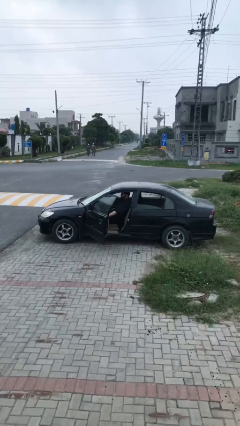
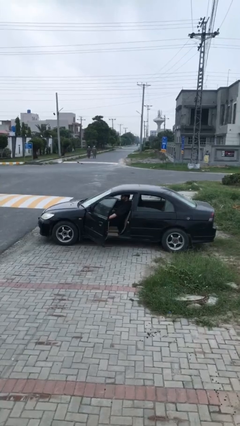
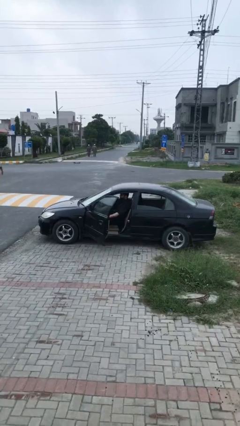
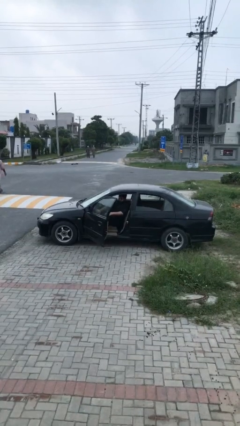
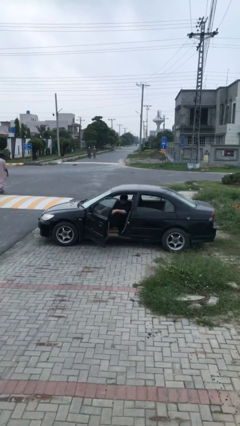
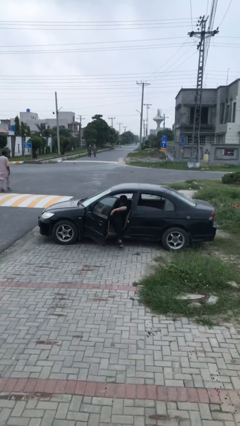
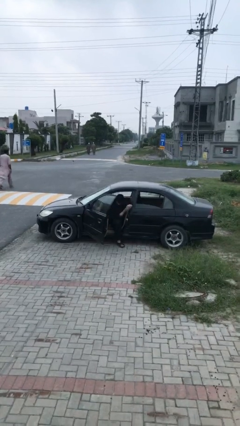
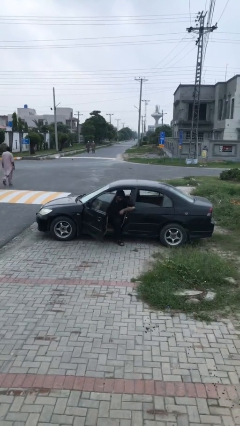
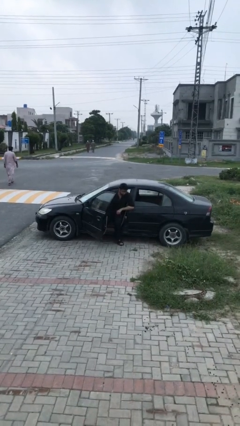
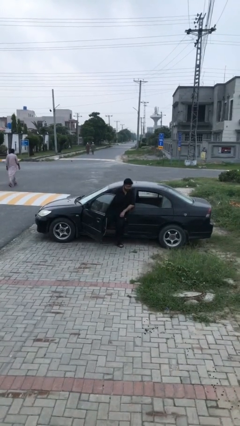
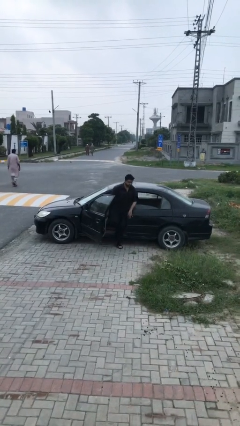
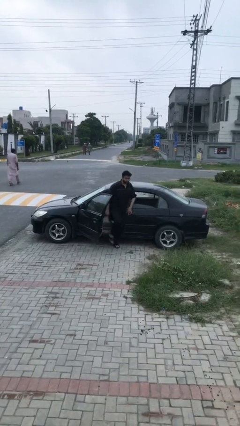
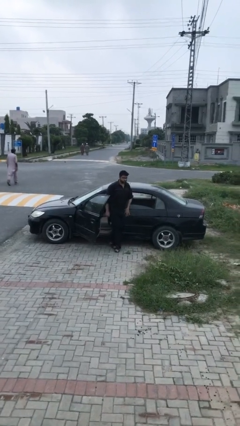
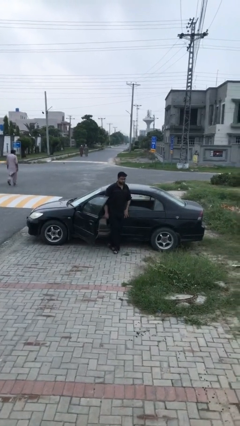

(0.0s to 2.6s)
person exits car

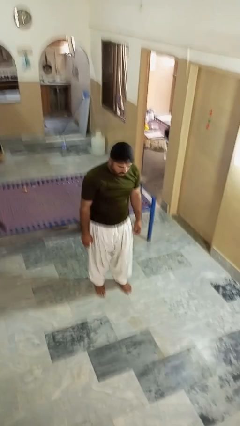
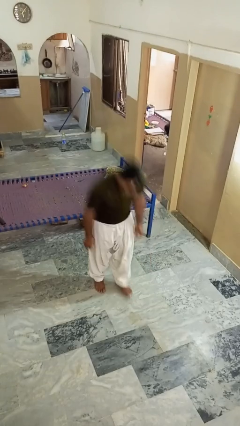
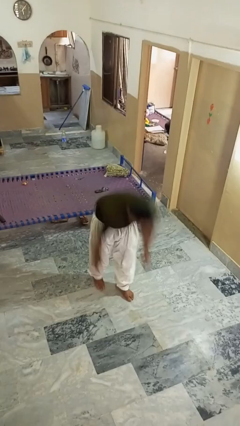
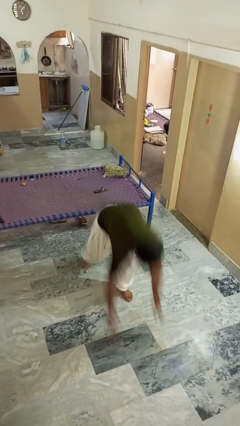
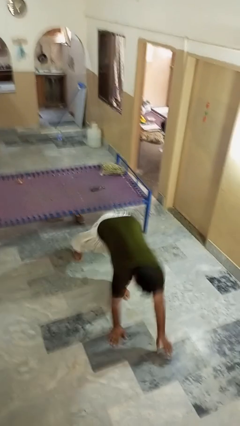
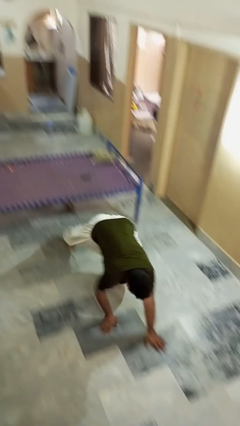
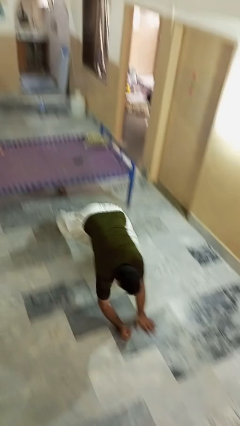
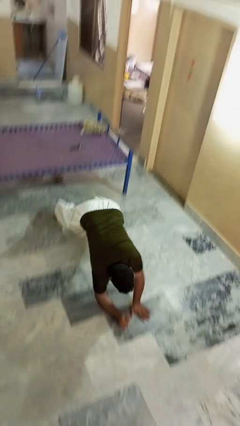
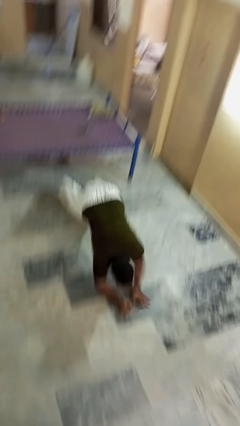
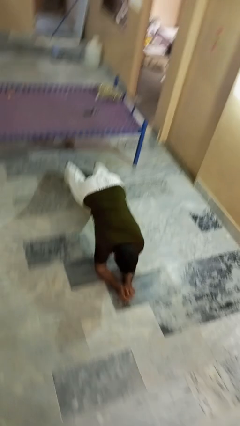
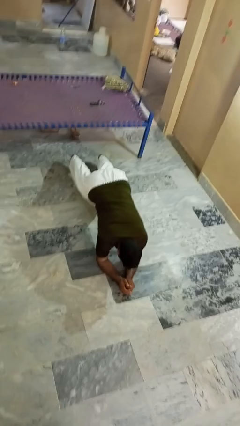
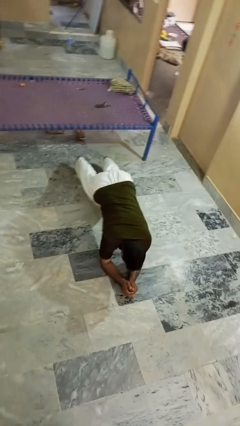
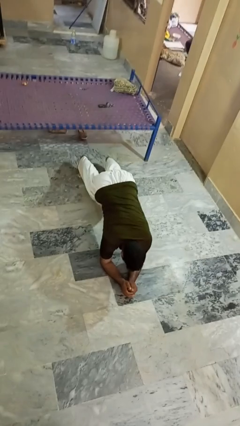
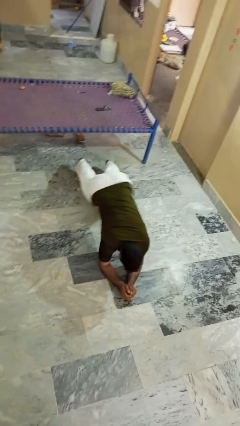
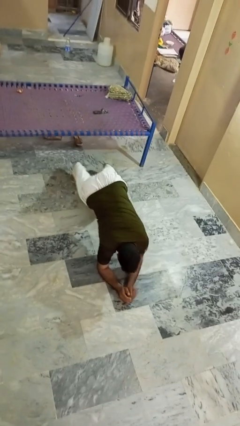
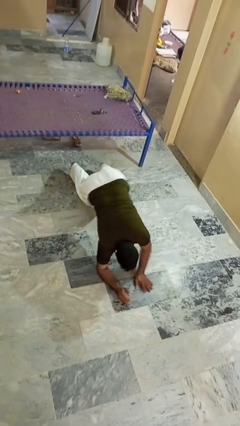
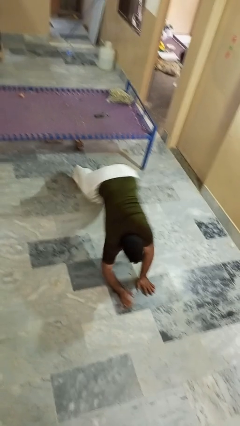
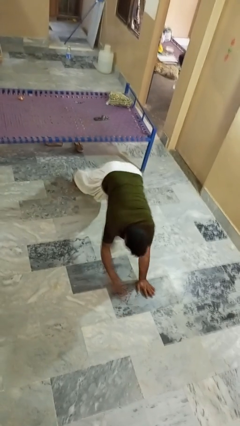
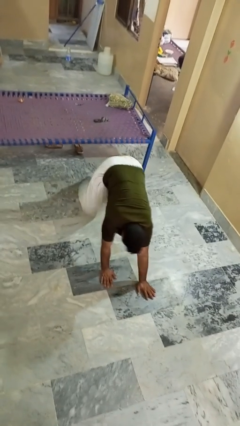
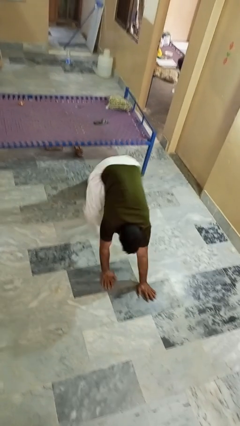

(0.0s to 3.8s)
person exercises with plank

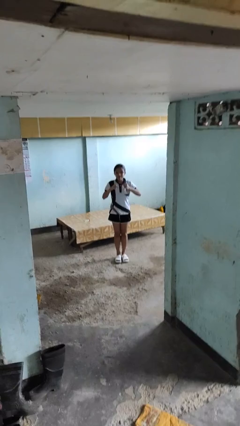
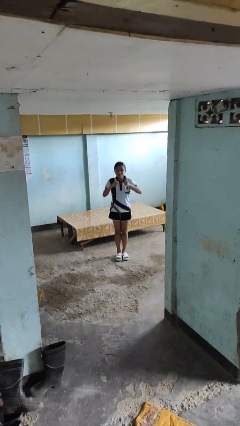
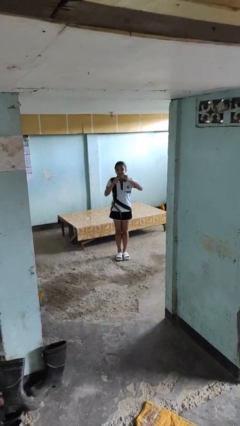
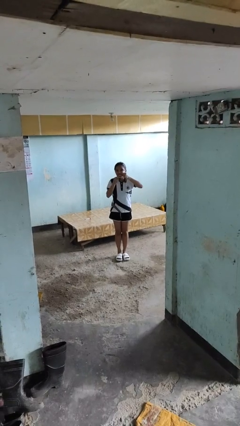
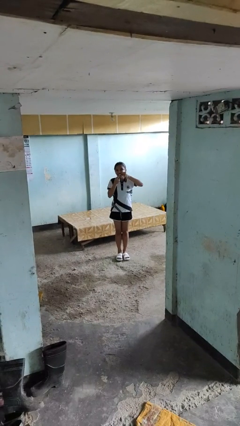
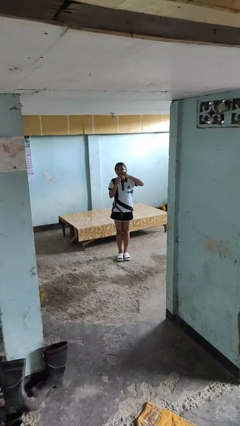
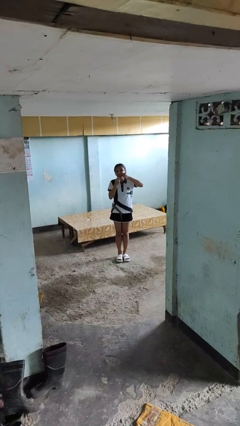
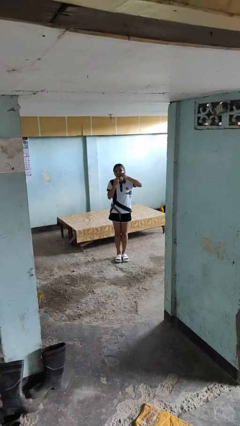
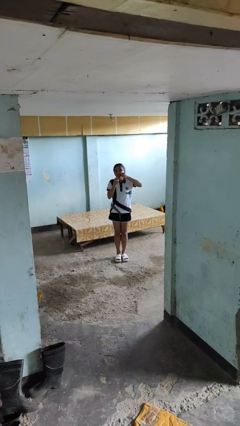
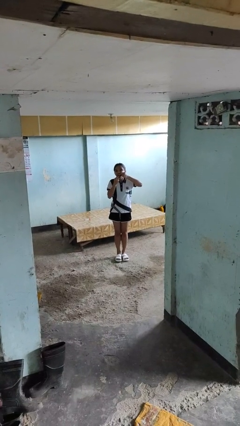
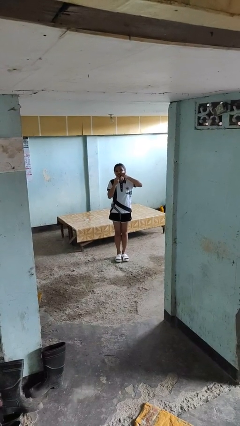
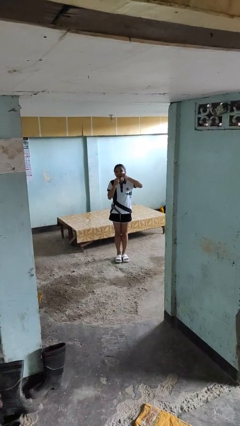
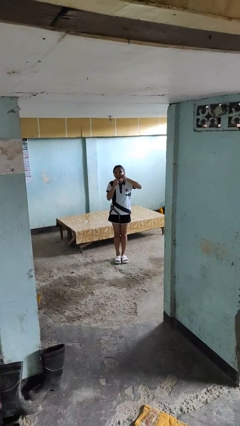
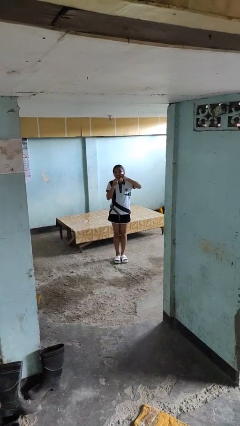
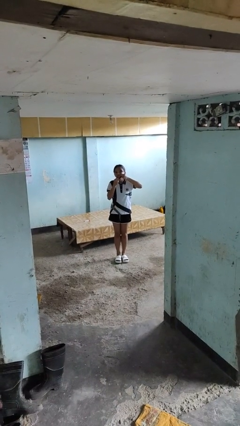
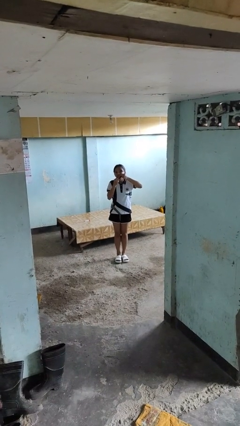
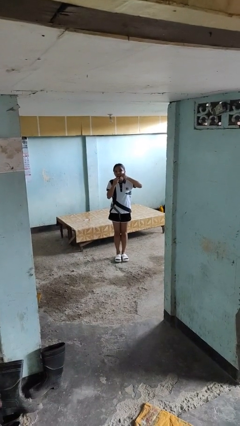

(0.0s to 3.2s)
person flosses

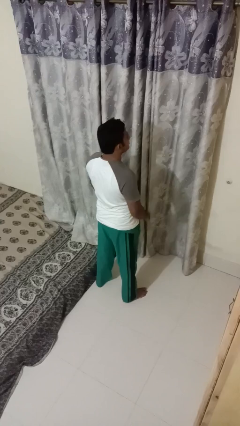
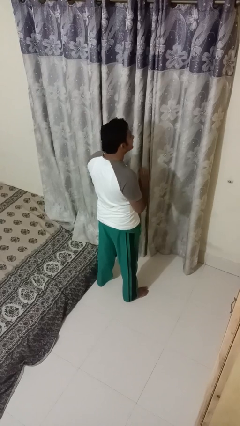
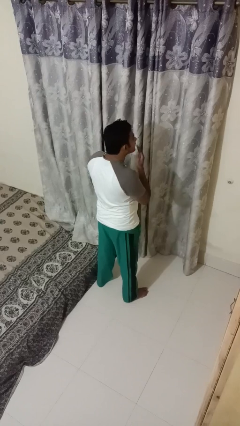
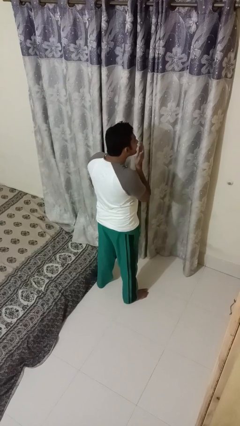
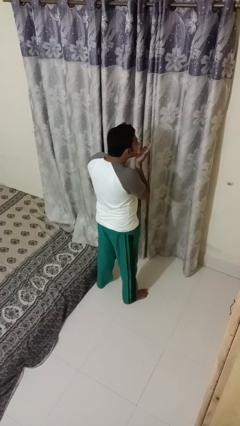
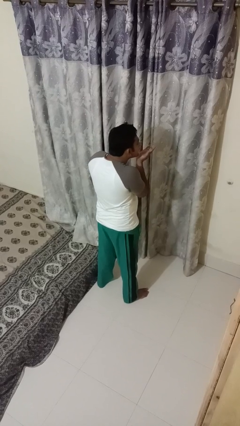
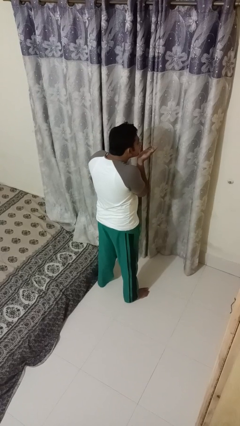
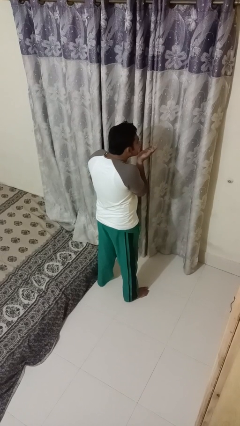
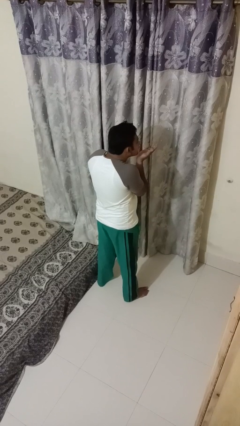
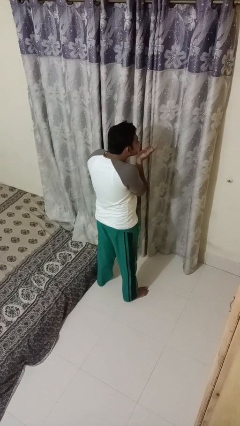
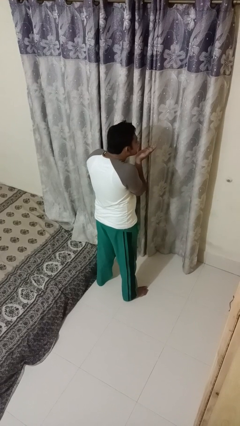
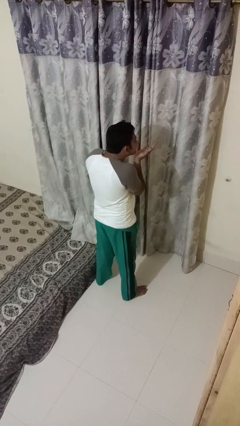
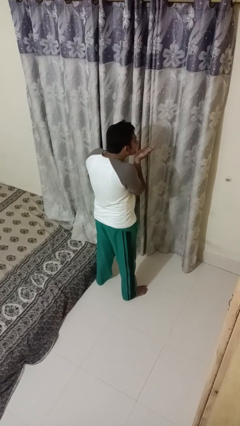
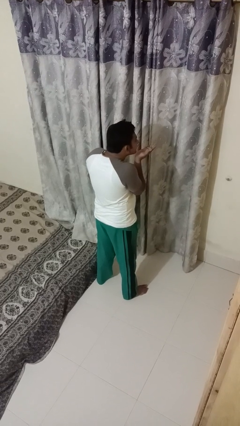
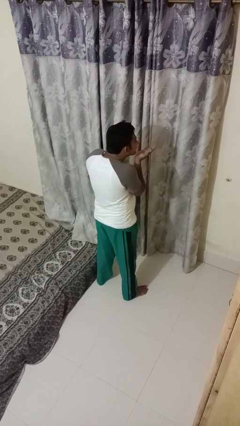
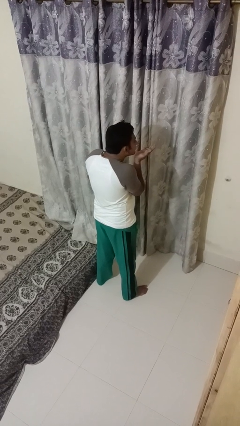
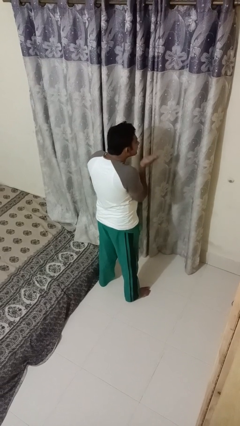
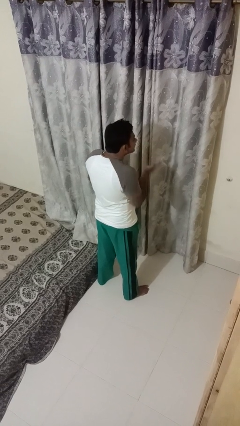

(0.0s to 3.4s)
person gestures blow kiss

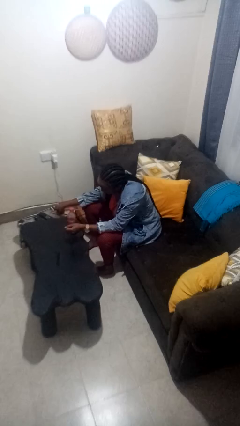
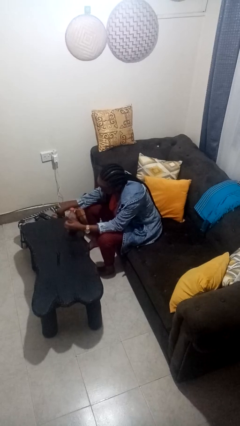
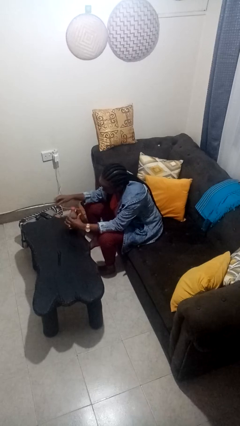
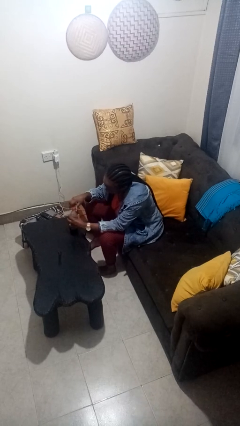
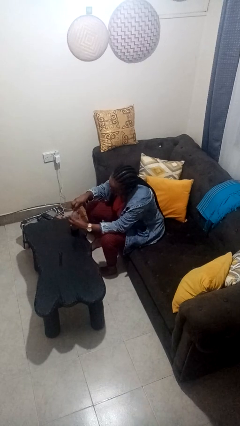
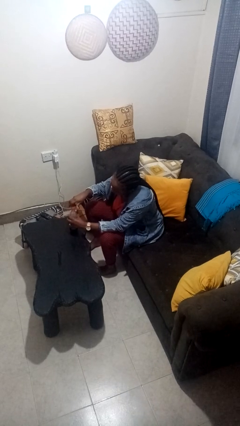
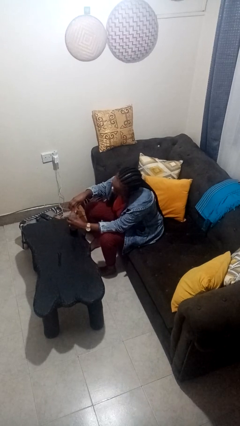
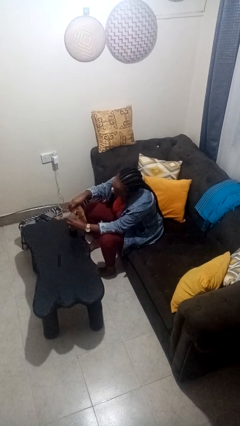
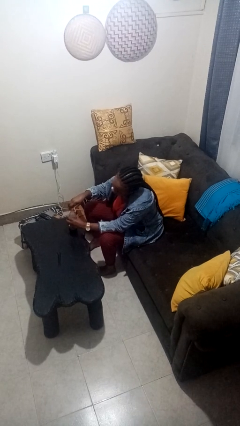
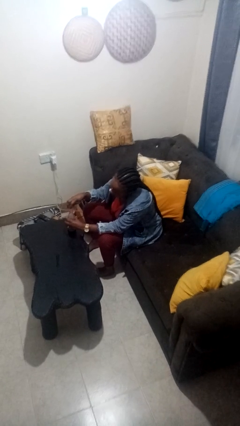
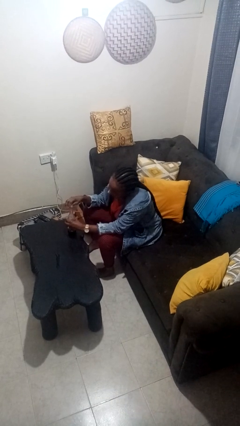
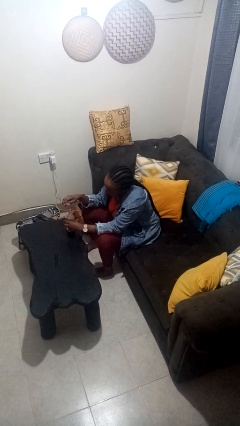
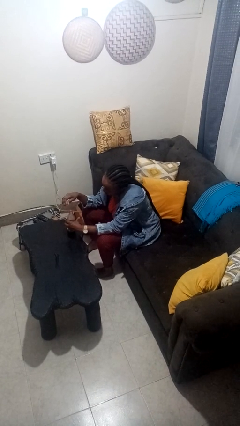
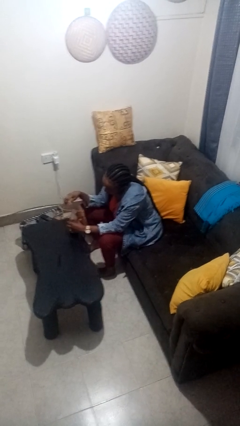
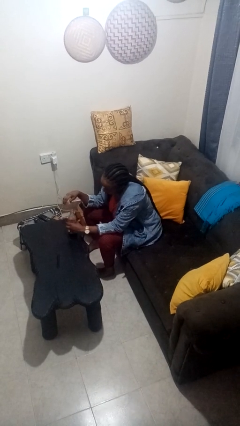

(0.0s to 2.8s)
person unscrews lid from bottle

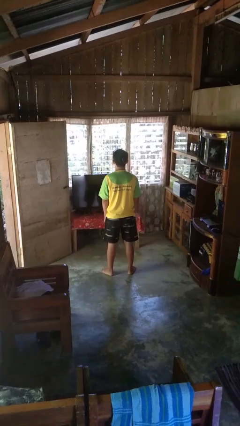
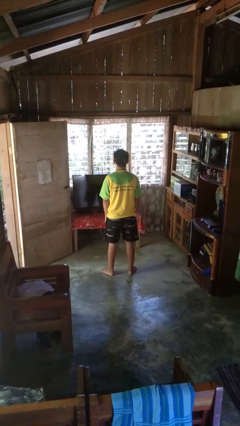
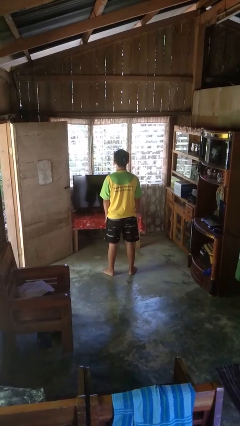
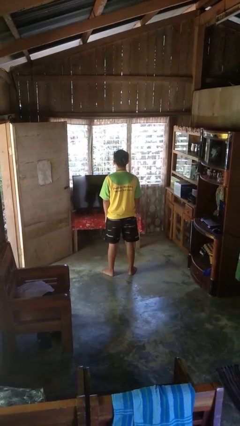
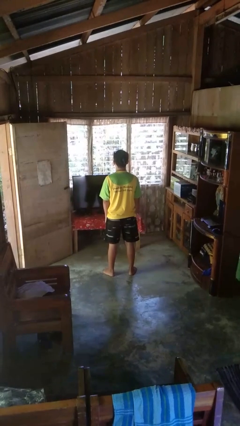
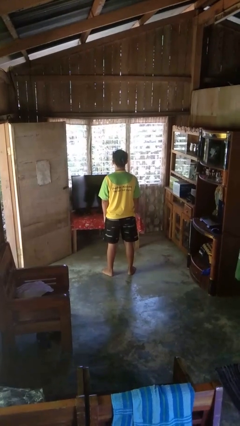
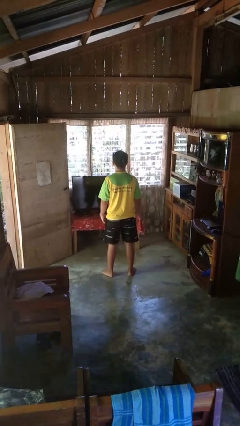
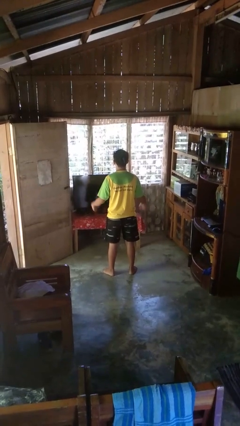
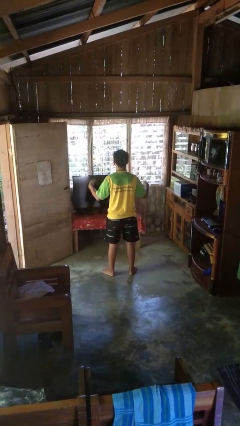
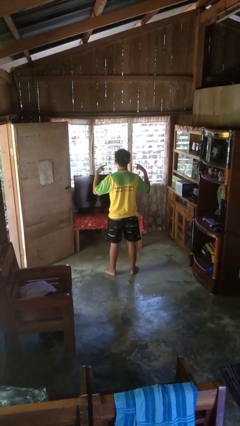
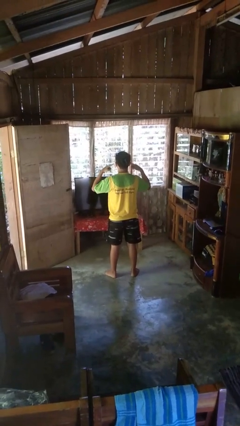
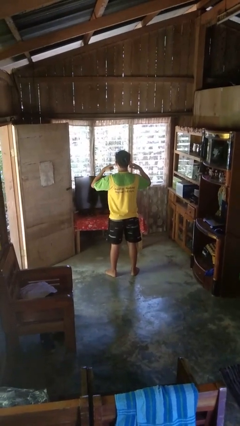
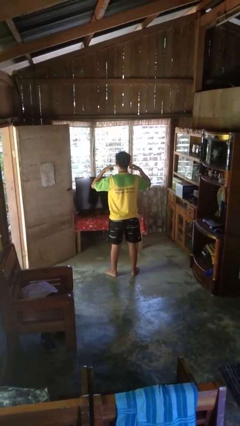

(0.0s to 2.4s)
person puts fingers in ear
